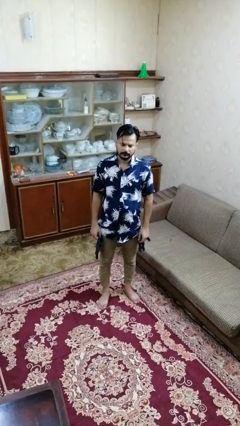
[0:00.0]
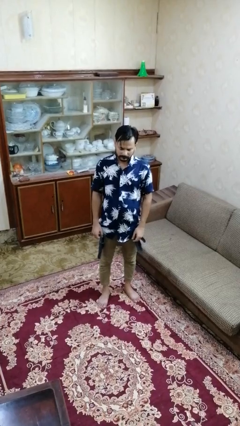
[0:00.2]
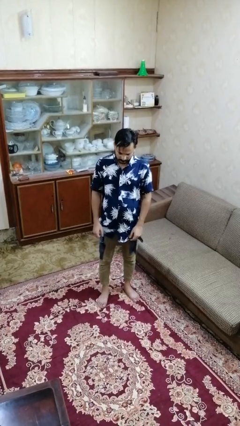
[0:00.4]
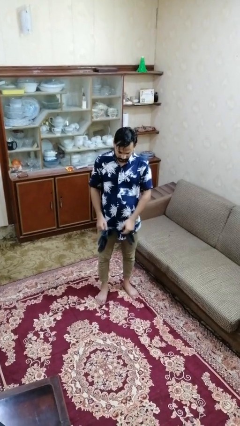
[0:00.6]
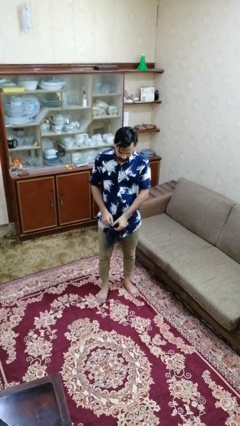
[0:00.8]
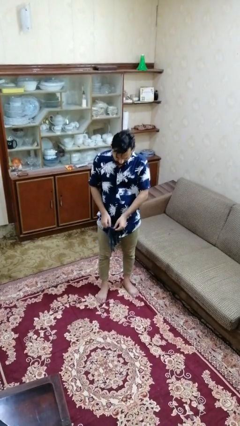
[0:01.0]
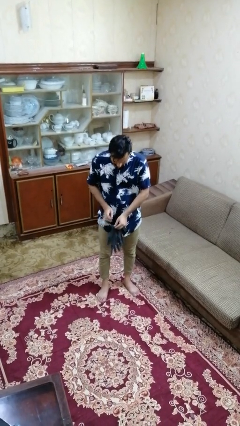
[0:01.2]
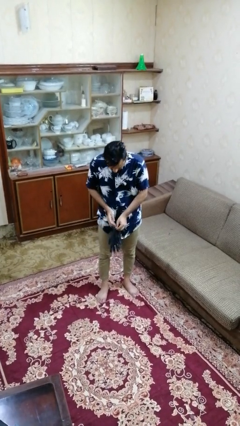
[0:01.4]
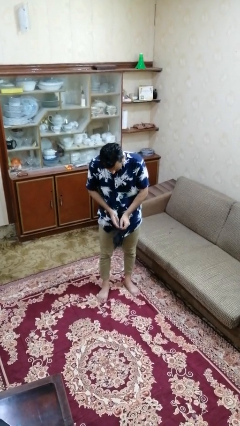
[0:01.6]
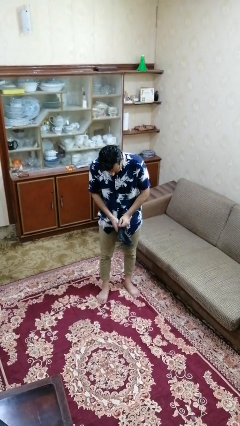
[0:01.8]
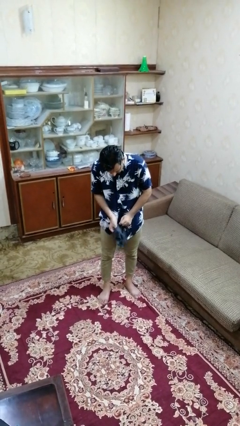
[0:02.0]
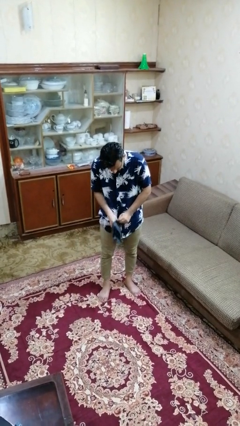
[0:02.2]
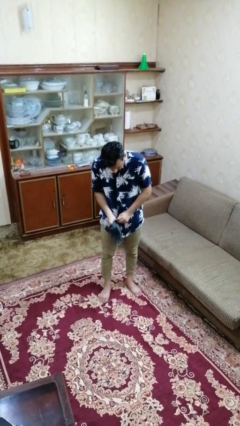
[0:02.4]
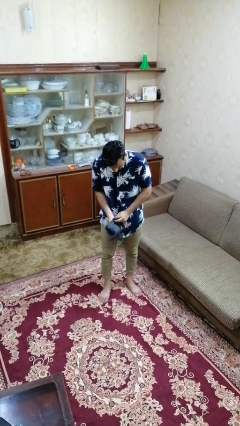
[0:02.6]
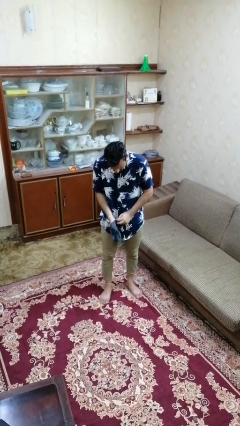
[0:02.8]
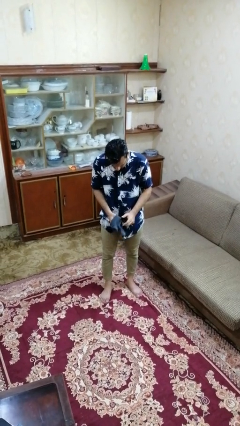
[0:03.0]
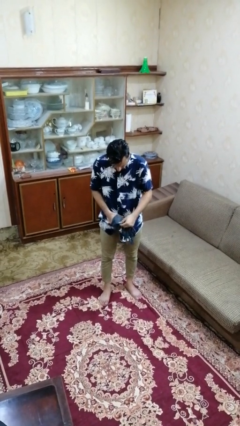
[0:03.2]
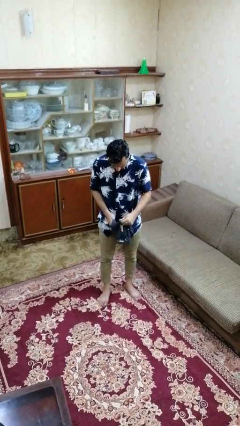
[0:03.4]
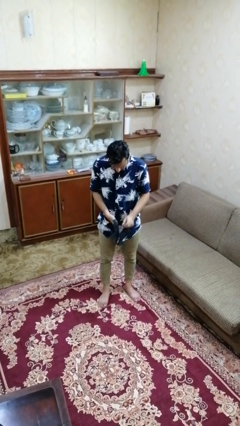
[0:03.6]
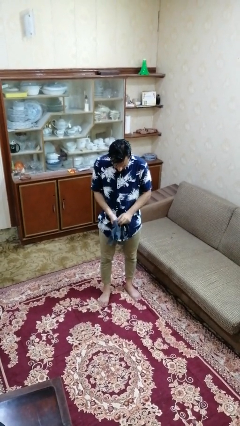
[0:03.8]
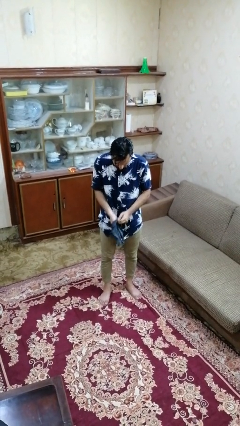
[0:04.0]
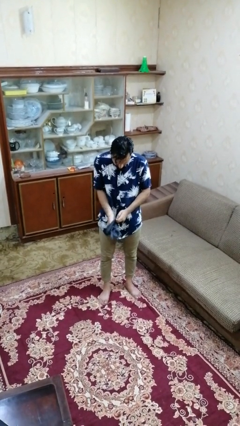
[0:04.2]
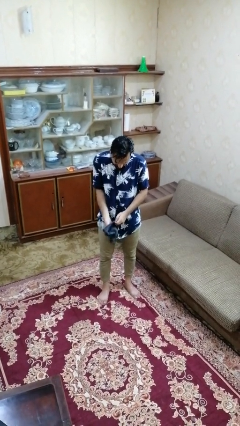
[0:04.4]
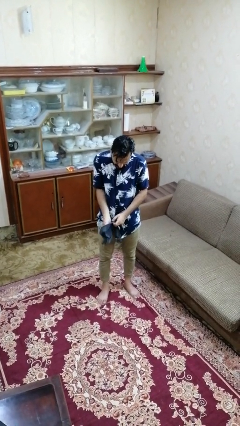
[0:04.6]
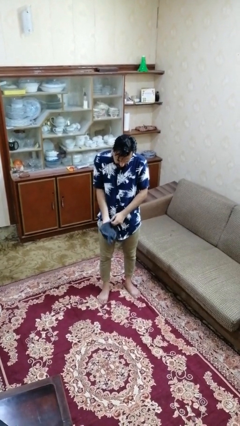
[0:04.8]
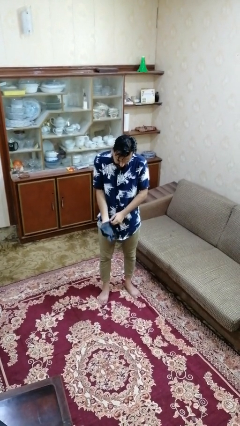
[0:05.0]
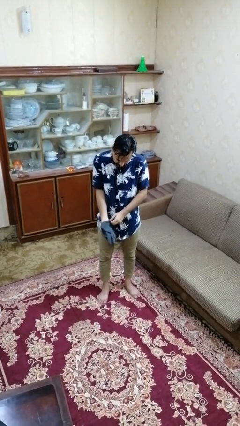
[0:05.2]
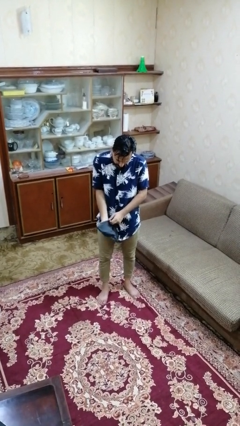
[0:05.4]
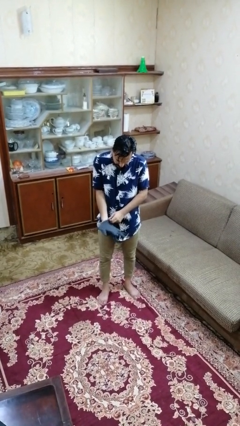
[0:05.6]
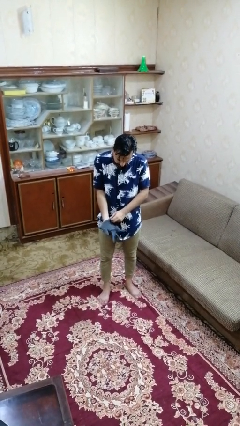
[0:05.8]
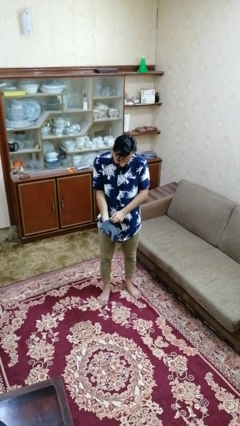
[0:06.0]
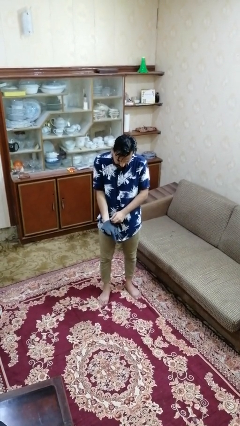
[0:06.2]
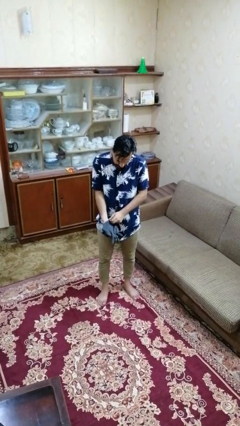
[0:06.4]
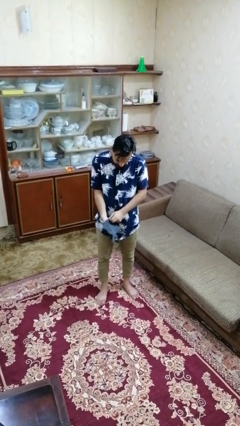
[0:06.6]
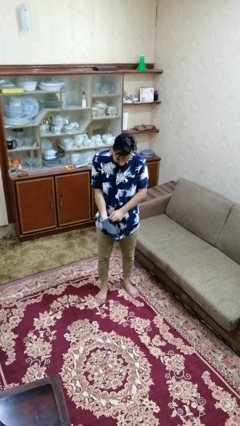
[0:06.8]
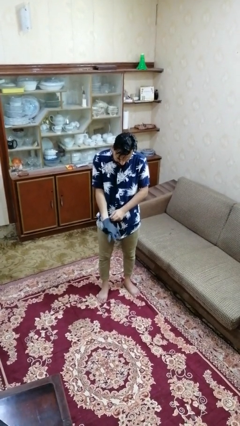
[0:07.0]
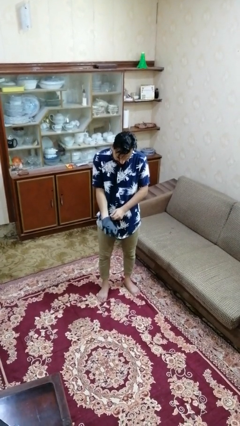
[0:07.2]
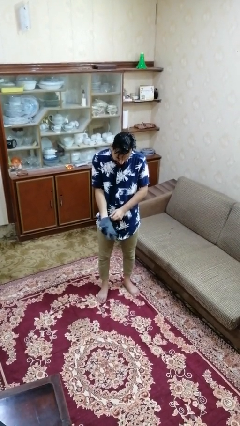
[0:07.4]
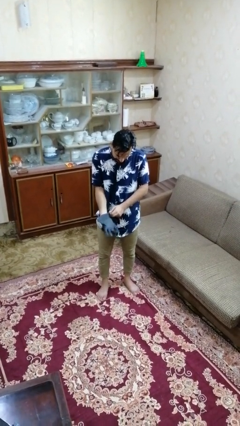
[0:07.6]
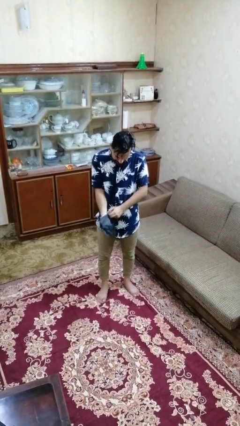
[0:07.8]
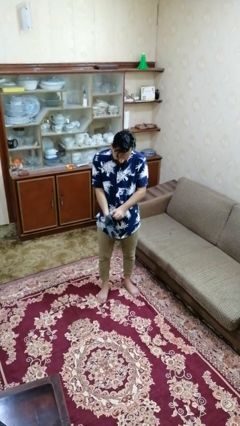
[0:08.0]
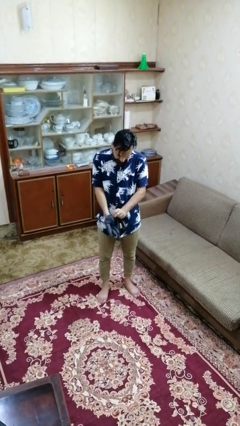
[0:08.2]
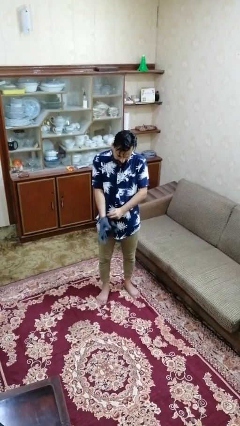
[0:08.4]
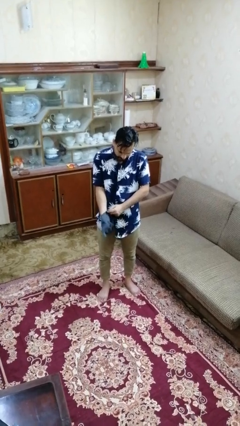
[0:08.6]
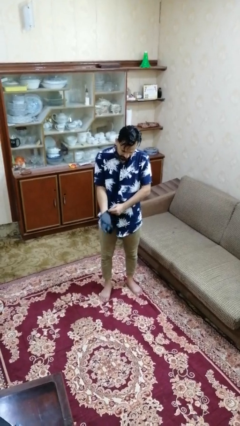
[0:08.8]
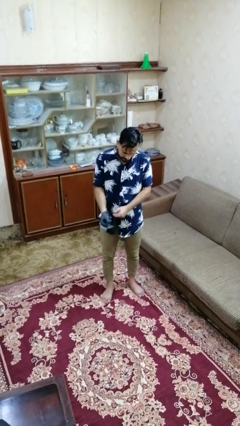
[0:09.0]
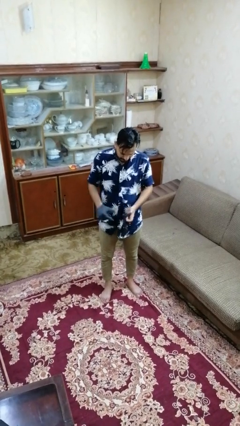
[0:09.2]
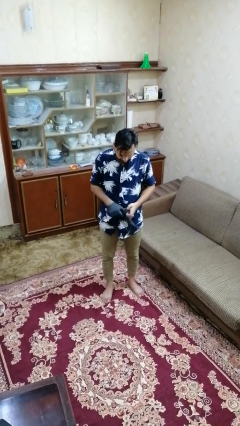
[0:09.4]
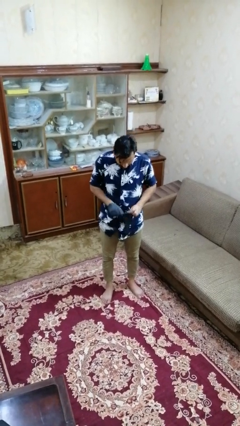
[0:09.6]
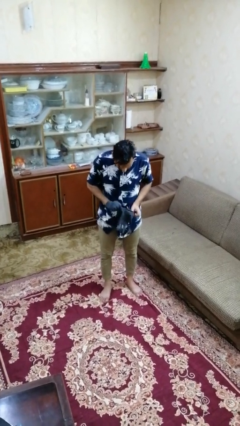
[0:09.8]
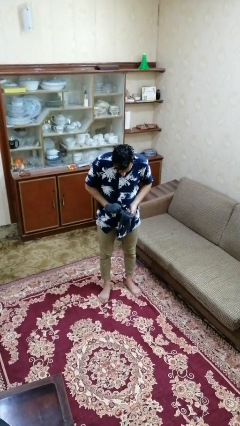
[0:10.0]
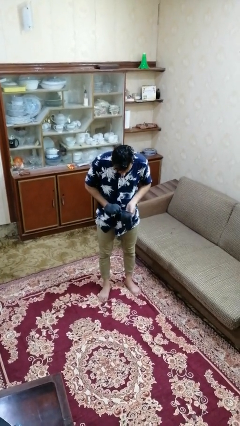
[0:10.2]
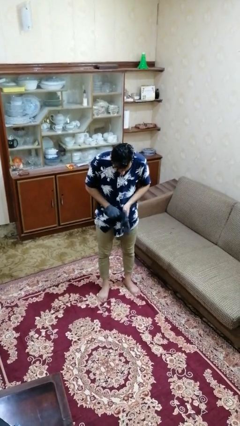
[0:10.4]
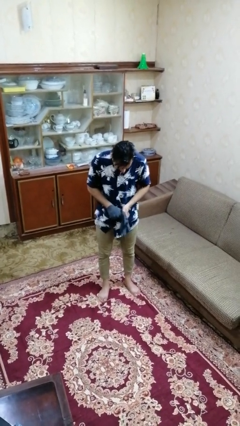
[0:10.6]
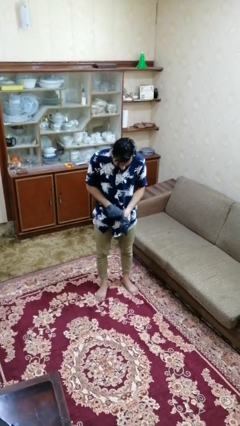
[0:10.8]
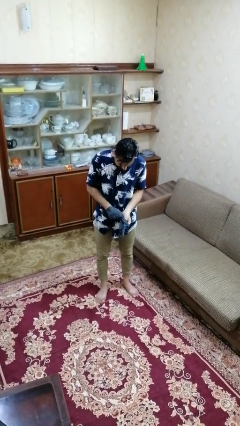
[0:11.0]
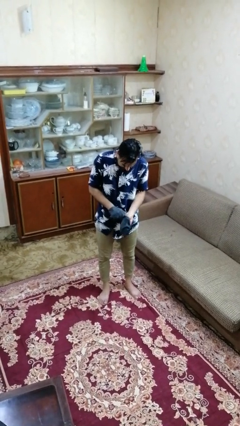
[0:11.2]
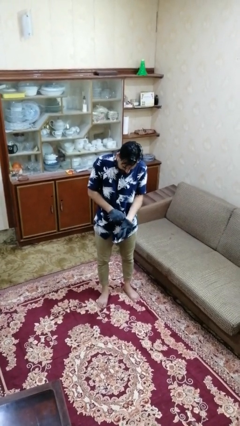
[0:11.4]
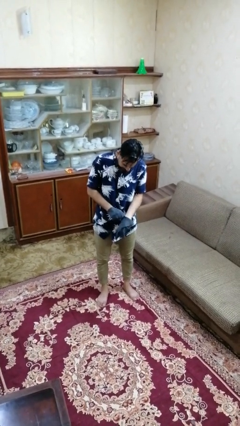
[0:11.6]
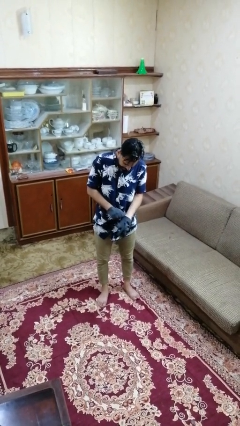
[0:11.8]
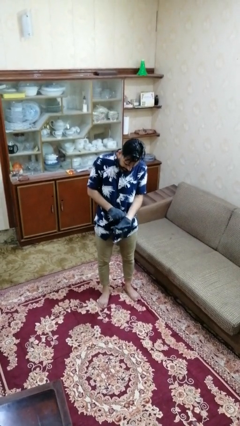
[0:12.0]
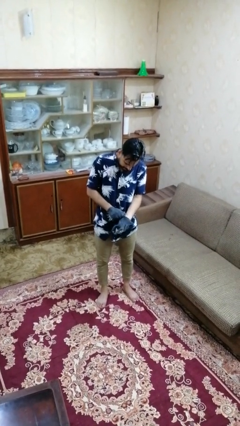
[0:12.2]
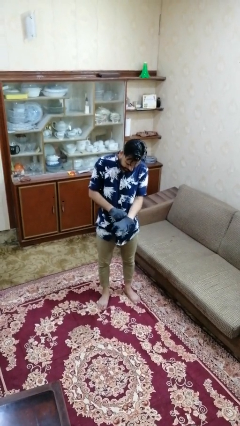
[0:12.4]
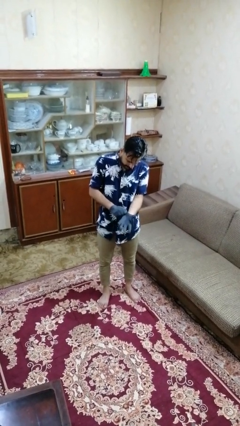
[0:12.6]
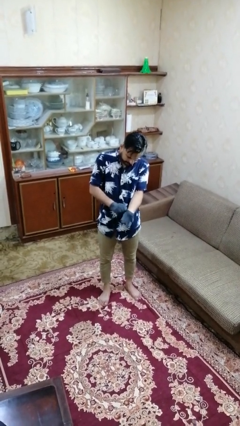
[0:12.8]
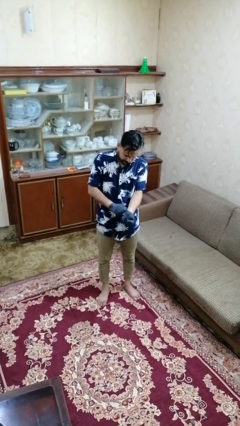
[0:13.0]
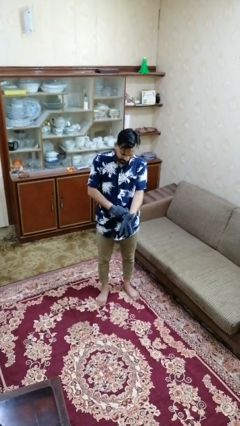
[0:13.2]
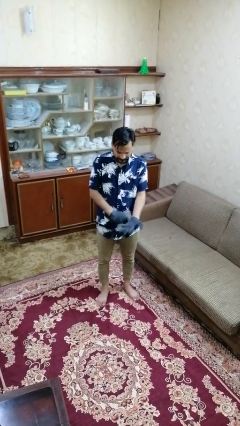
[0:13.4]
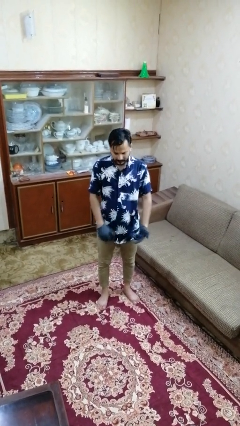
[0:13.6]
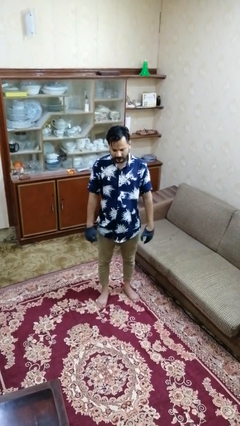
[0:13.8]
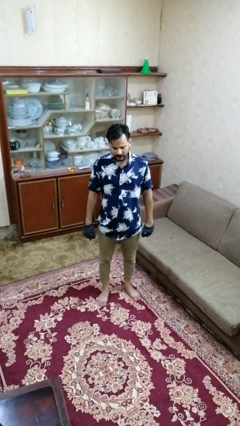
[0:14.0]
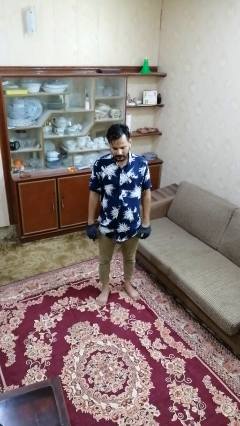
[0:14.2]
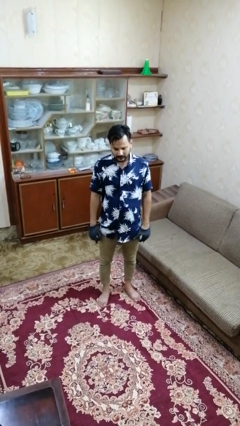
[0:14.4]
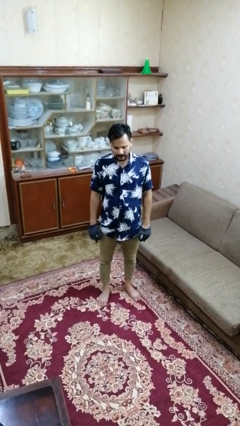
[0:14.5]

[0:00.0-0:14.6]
person puts on gloves

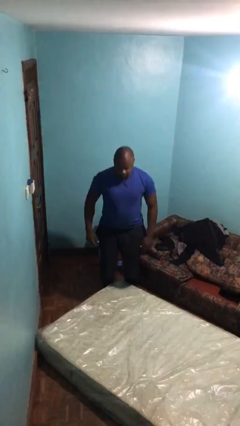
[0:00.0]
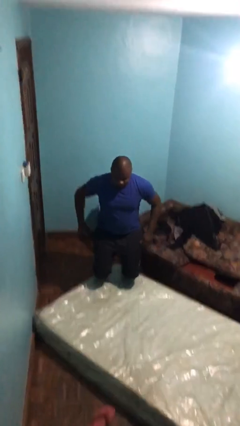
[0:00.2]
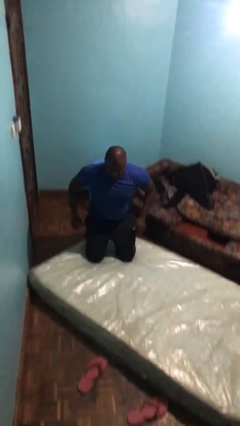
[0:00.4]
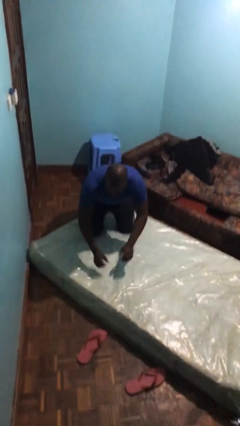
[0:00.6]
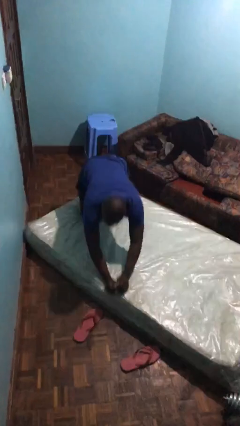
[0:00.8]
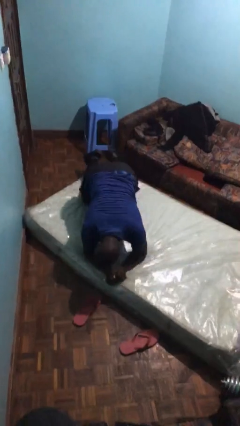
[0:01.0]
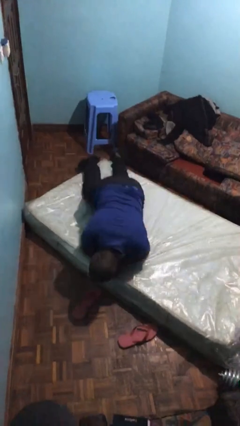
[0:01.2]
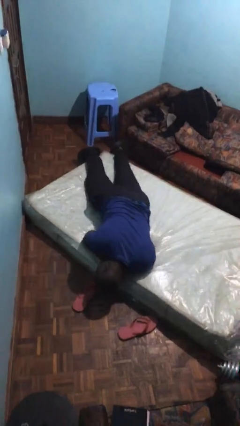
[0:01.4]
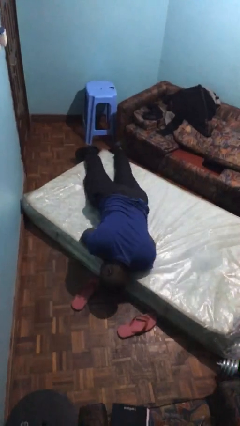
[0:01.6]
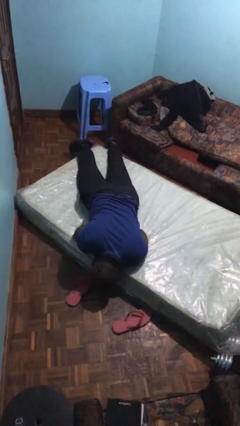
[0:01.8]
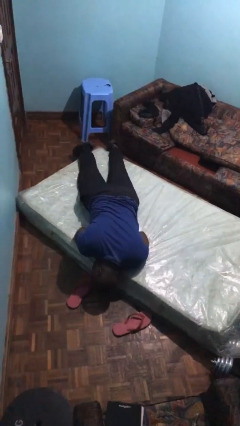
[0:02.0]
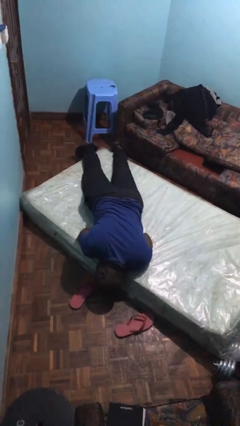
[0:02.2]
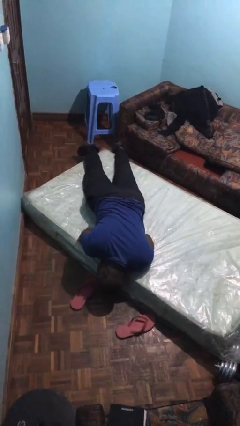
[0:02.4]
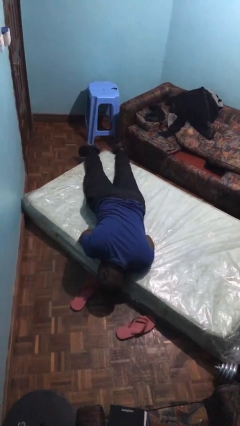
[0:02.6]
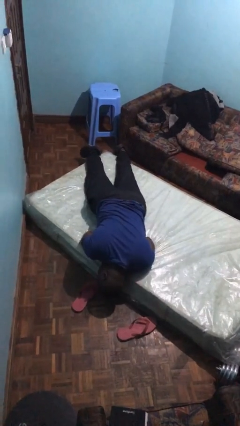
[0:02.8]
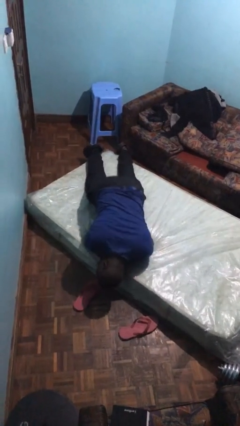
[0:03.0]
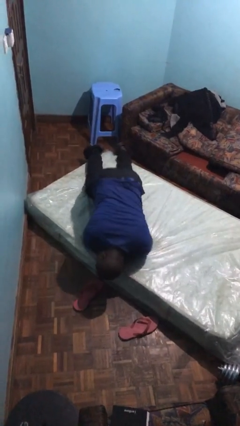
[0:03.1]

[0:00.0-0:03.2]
person lies down on bed
